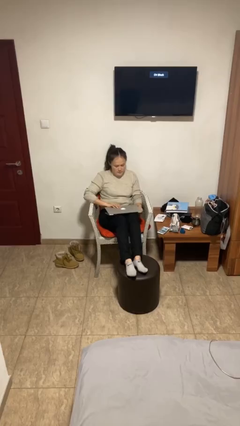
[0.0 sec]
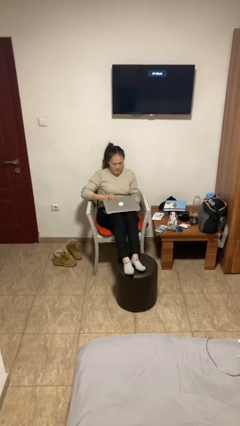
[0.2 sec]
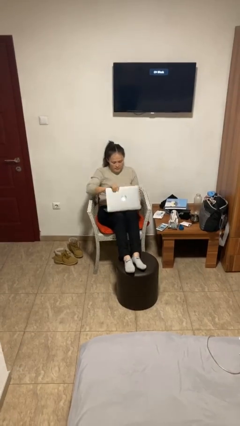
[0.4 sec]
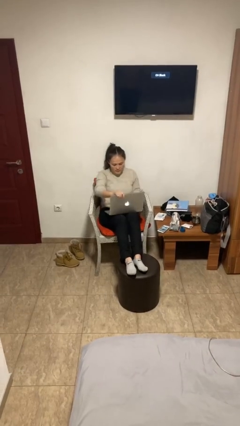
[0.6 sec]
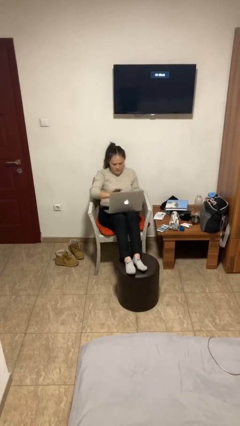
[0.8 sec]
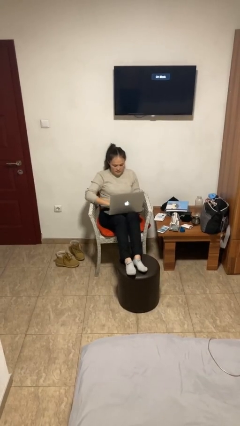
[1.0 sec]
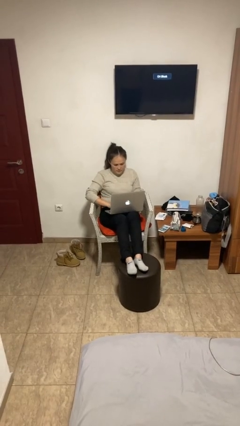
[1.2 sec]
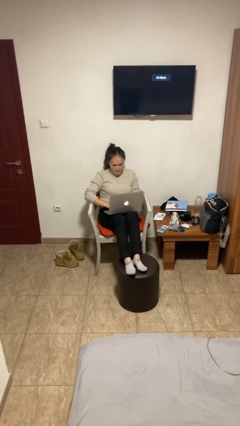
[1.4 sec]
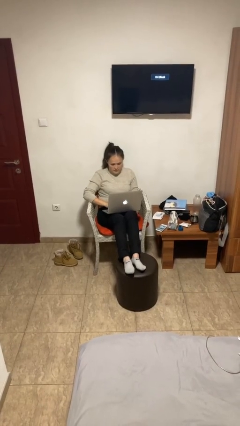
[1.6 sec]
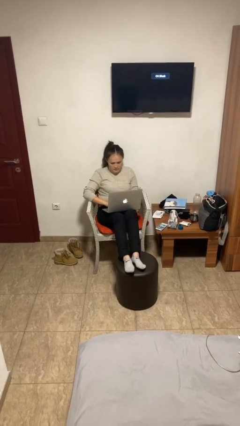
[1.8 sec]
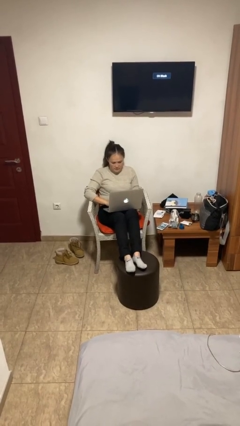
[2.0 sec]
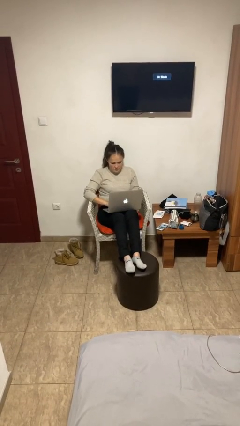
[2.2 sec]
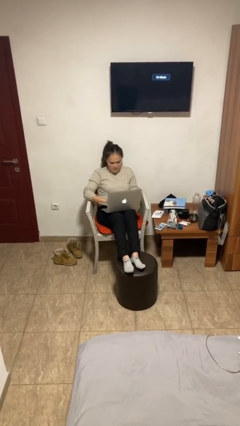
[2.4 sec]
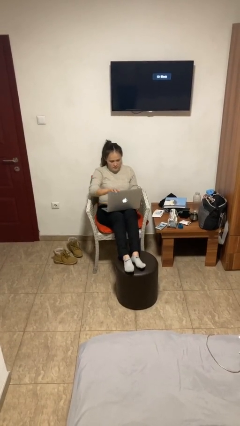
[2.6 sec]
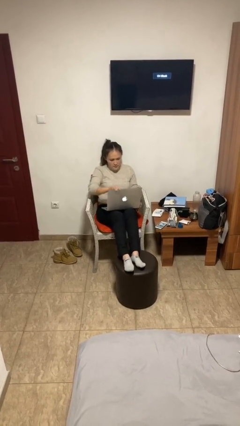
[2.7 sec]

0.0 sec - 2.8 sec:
person interacts with laptop

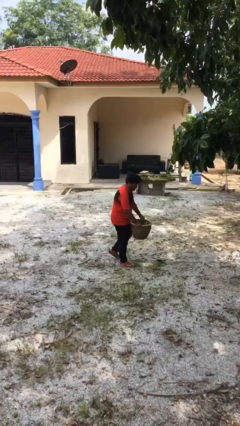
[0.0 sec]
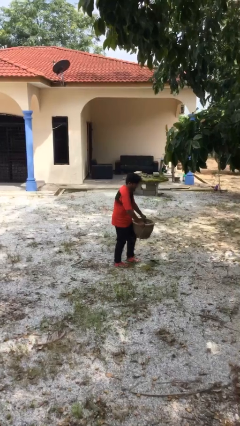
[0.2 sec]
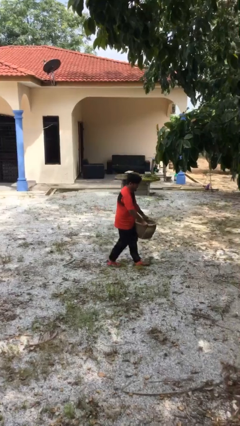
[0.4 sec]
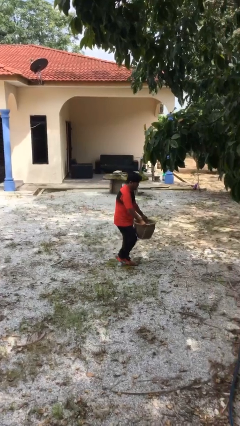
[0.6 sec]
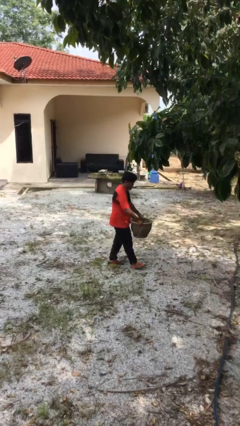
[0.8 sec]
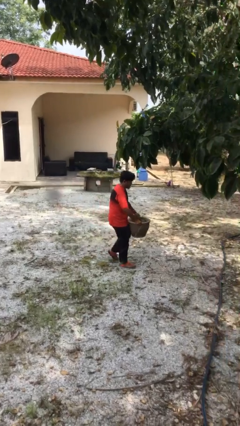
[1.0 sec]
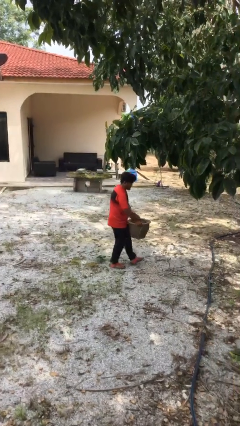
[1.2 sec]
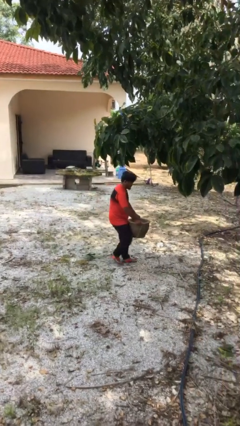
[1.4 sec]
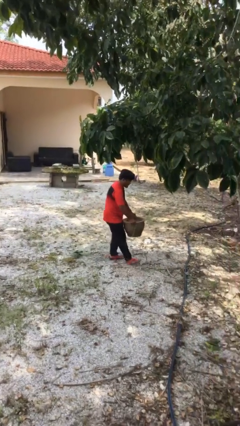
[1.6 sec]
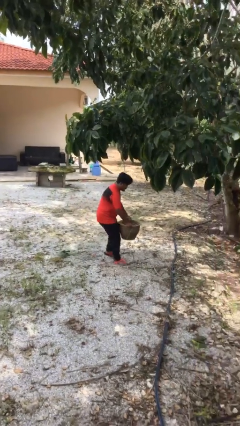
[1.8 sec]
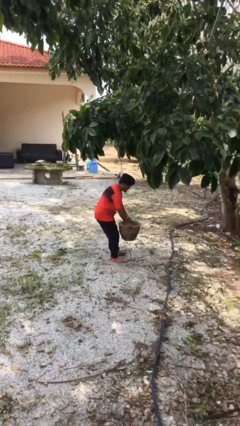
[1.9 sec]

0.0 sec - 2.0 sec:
person carries heavy object

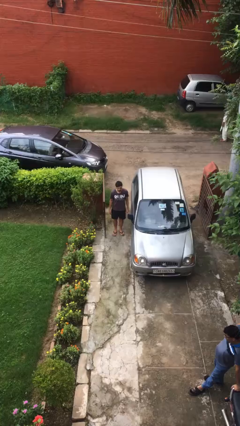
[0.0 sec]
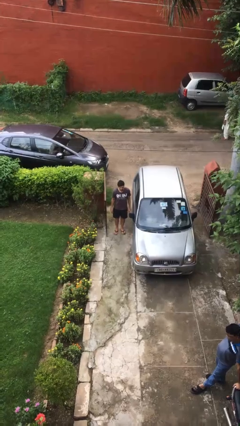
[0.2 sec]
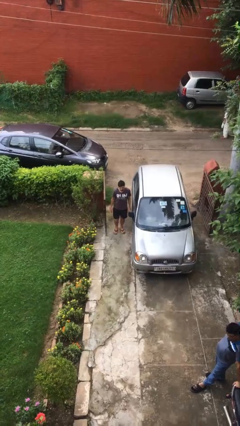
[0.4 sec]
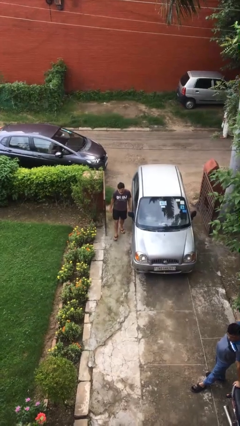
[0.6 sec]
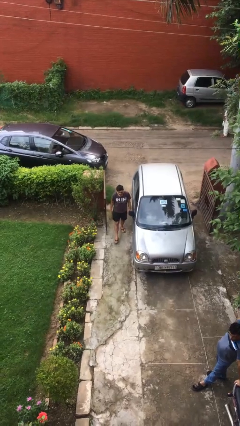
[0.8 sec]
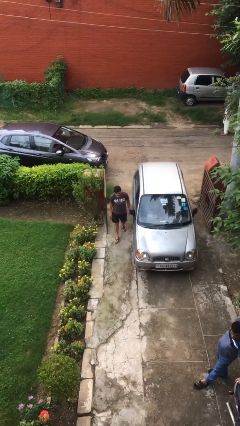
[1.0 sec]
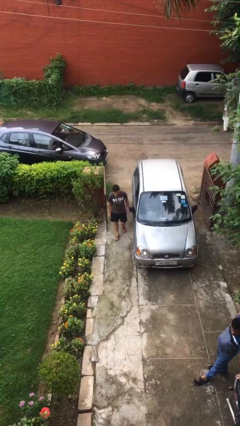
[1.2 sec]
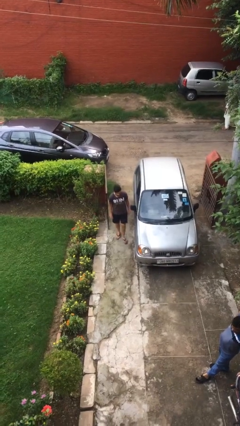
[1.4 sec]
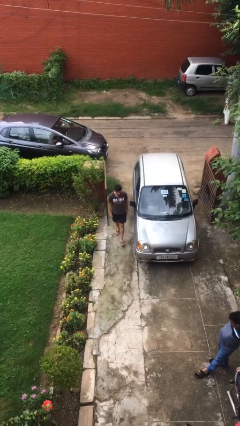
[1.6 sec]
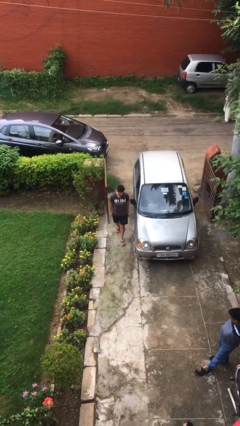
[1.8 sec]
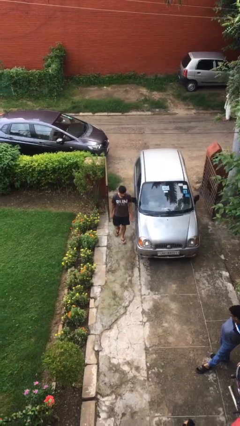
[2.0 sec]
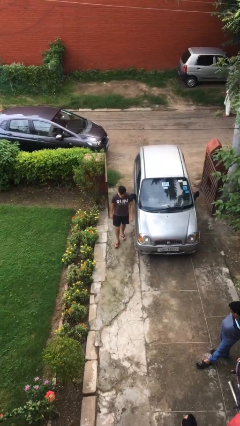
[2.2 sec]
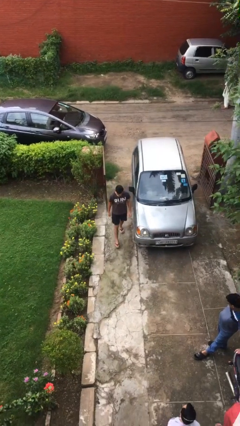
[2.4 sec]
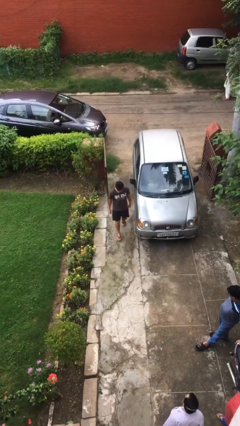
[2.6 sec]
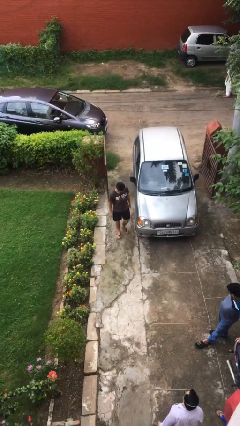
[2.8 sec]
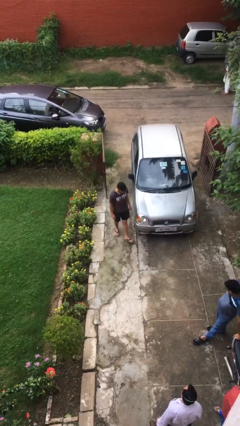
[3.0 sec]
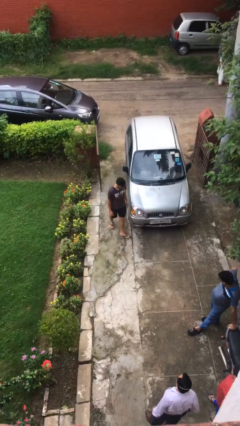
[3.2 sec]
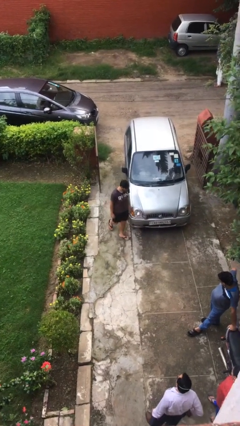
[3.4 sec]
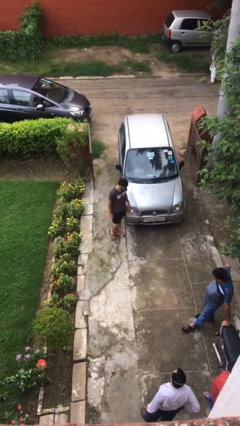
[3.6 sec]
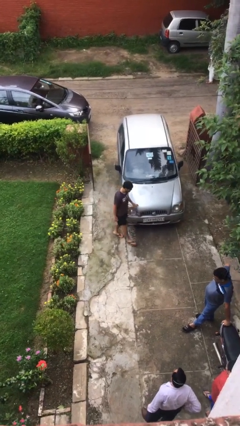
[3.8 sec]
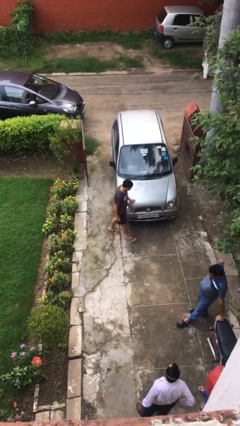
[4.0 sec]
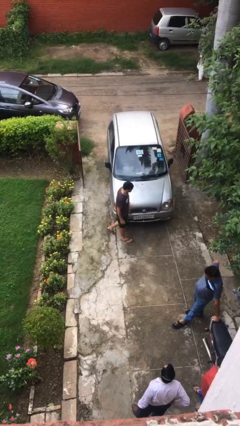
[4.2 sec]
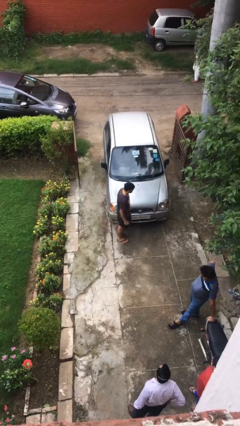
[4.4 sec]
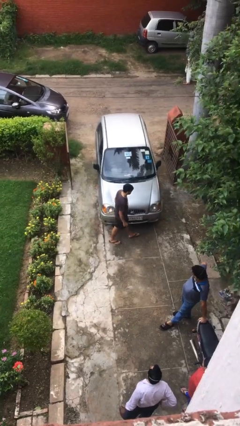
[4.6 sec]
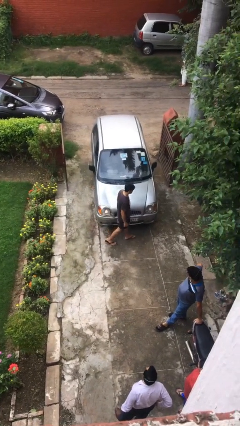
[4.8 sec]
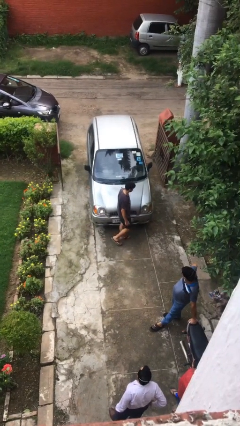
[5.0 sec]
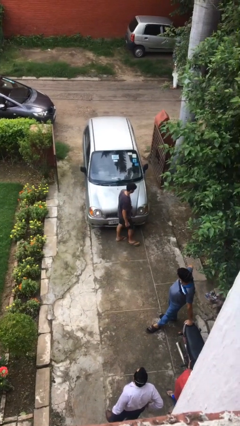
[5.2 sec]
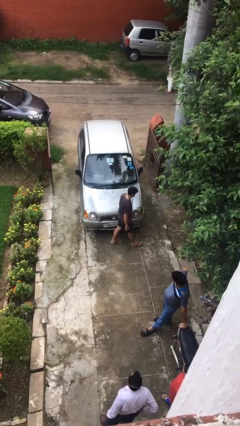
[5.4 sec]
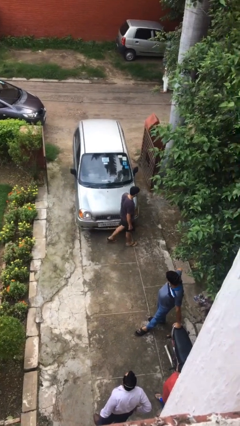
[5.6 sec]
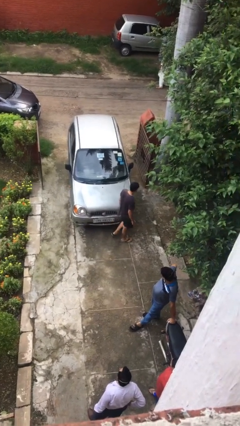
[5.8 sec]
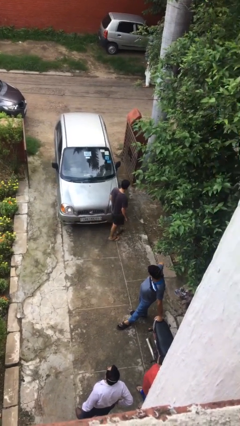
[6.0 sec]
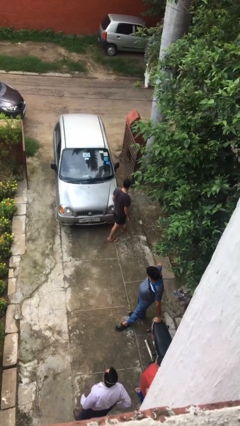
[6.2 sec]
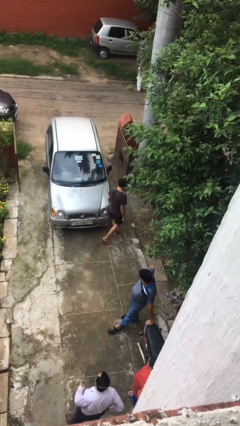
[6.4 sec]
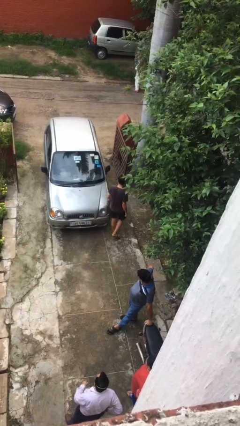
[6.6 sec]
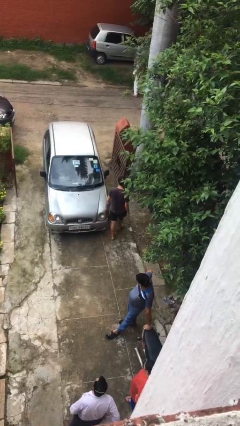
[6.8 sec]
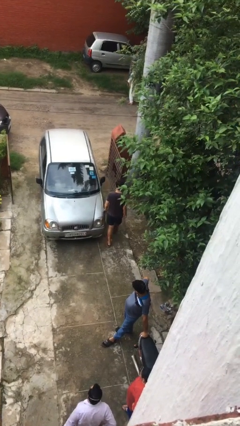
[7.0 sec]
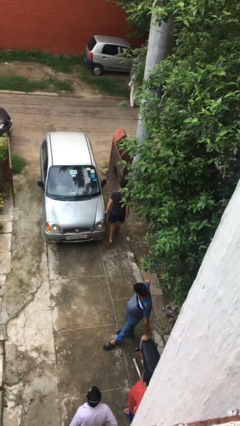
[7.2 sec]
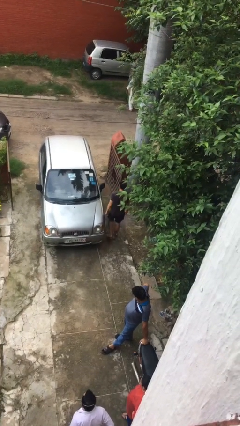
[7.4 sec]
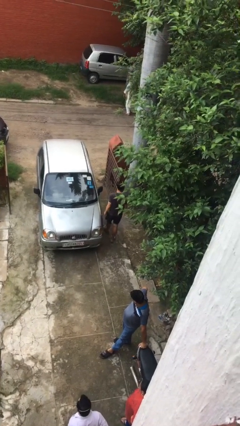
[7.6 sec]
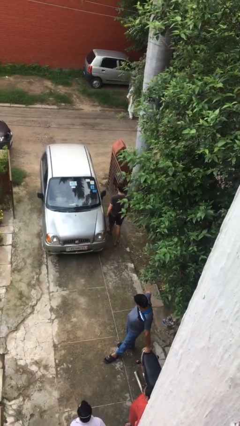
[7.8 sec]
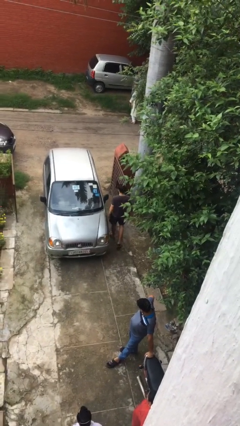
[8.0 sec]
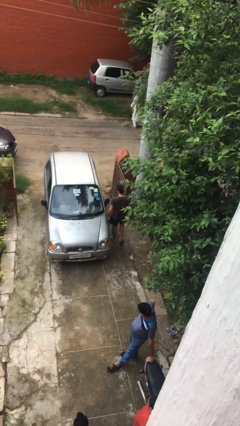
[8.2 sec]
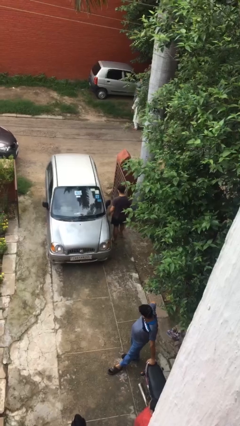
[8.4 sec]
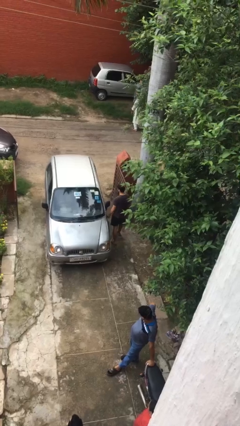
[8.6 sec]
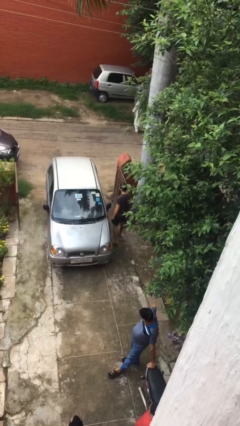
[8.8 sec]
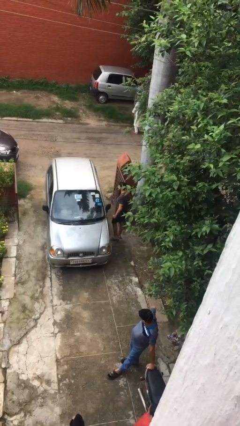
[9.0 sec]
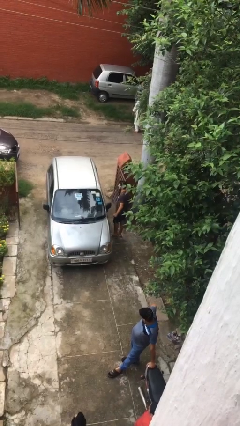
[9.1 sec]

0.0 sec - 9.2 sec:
person walks around car

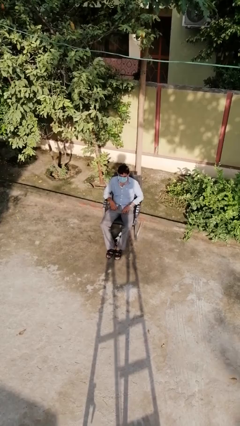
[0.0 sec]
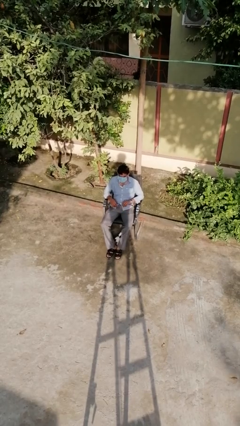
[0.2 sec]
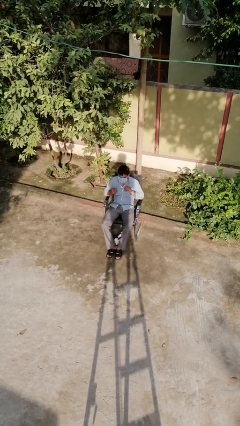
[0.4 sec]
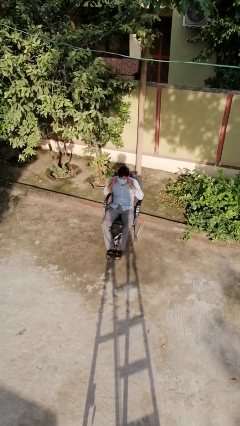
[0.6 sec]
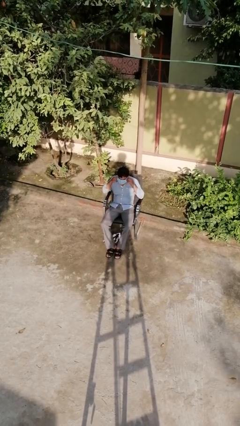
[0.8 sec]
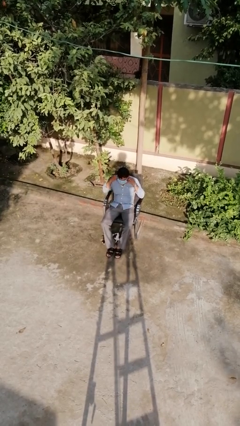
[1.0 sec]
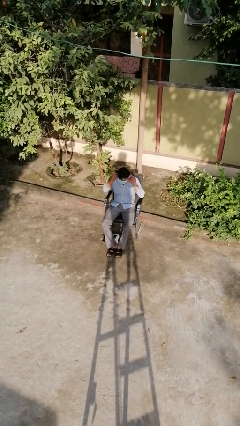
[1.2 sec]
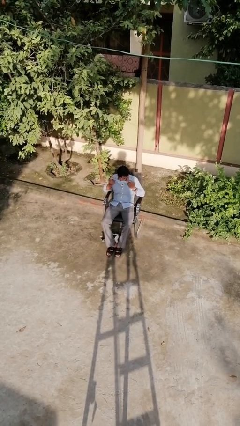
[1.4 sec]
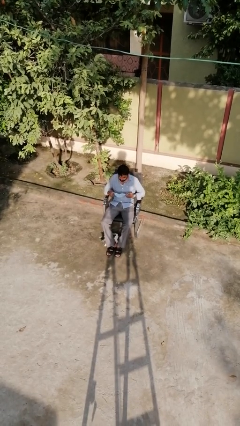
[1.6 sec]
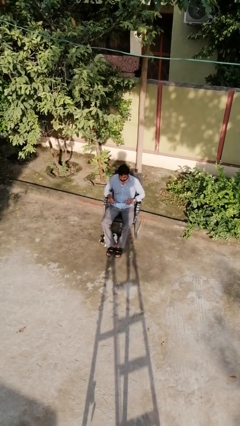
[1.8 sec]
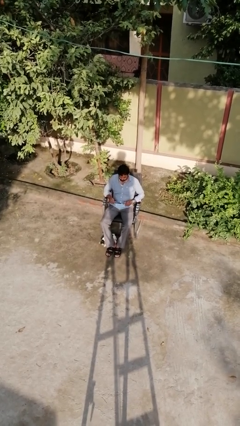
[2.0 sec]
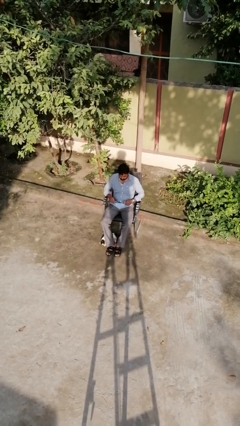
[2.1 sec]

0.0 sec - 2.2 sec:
person takes off facemask

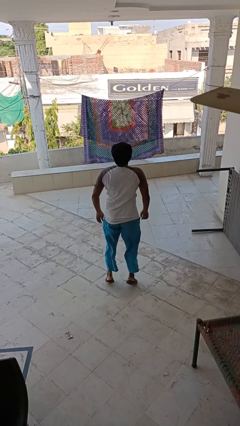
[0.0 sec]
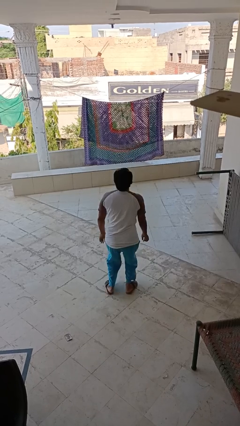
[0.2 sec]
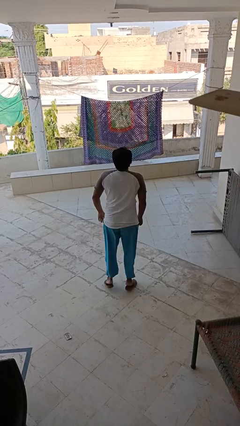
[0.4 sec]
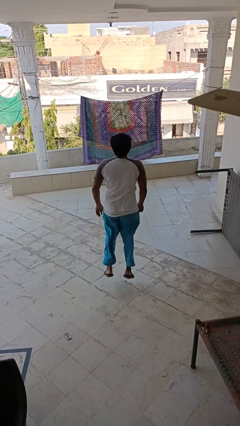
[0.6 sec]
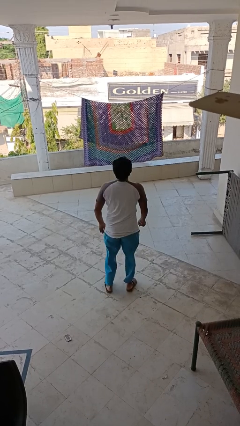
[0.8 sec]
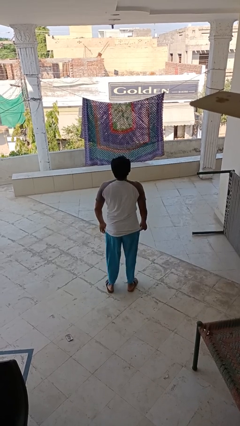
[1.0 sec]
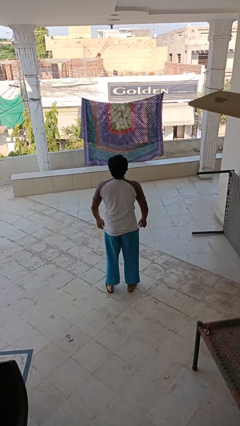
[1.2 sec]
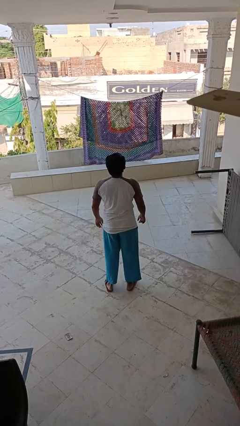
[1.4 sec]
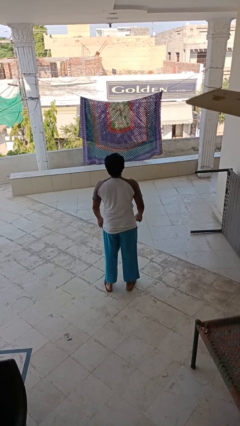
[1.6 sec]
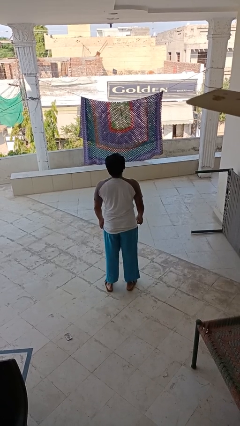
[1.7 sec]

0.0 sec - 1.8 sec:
person jumps
